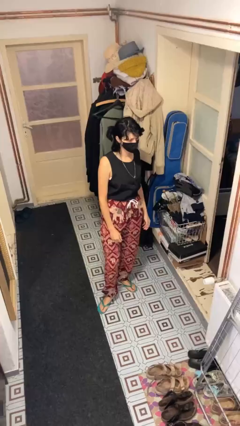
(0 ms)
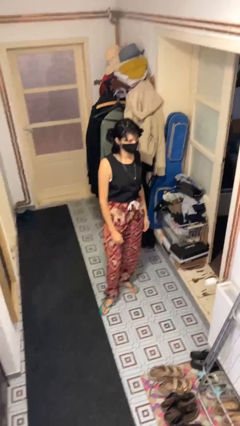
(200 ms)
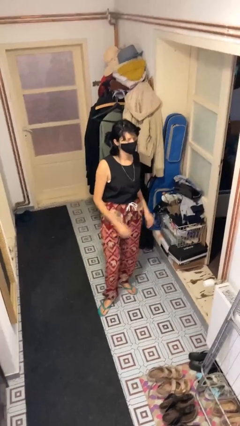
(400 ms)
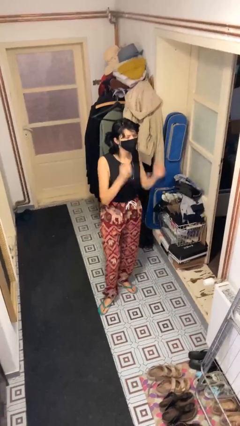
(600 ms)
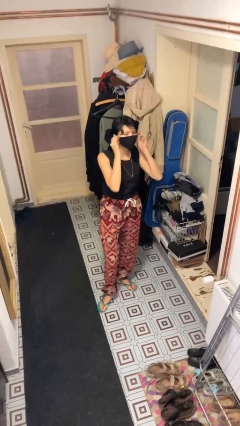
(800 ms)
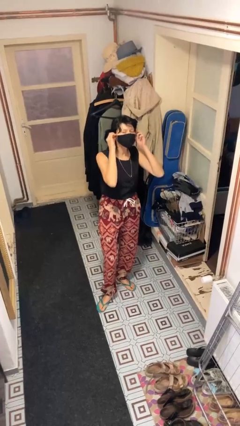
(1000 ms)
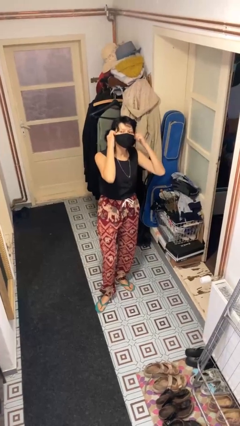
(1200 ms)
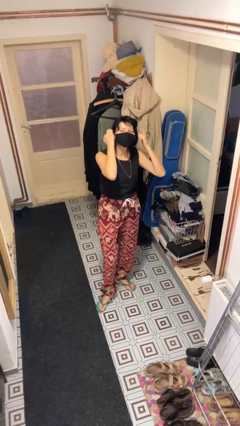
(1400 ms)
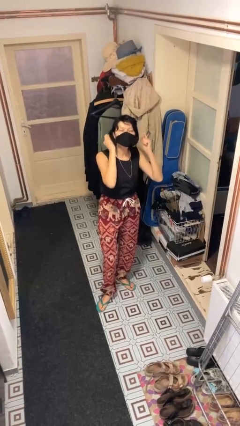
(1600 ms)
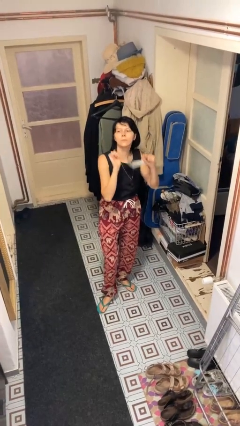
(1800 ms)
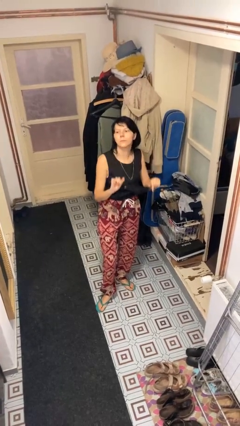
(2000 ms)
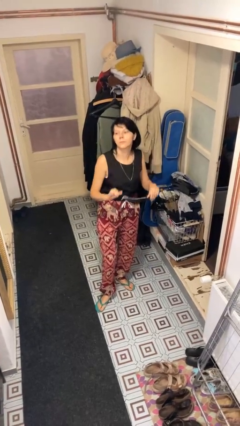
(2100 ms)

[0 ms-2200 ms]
person takes off facemask

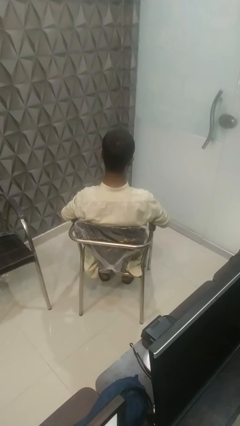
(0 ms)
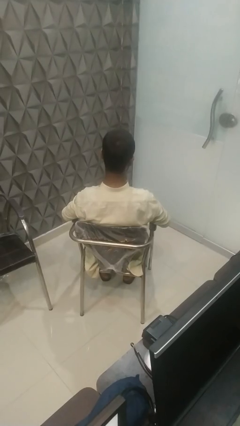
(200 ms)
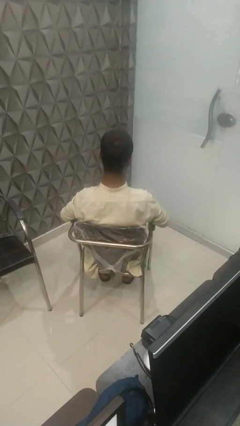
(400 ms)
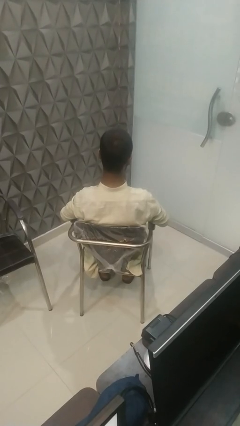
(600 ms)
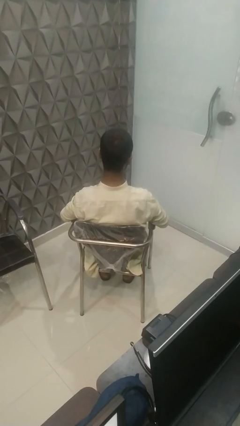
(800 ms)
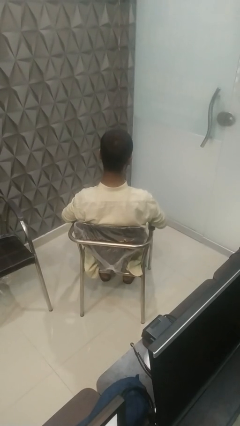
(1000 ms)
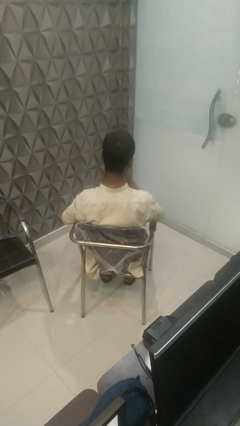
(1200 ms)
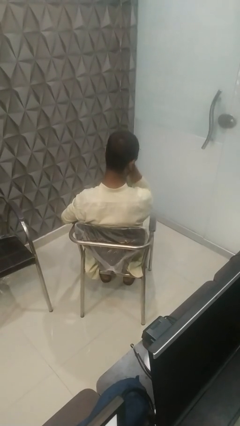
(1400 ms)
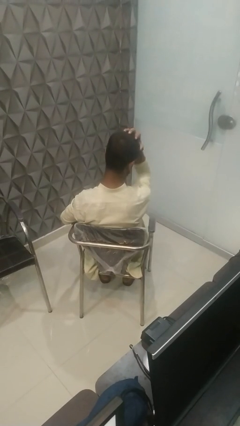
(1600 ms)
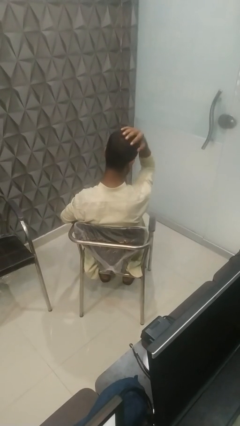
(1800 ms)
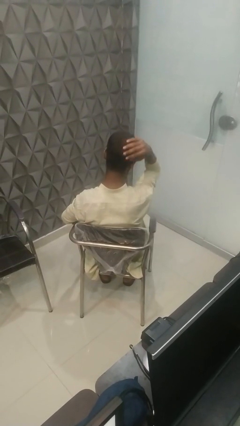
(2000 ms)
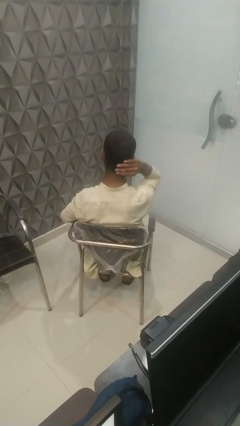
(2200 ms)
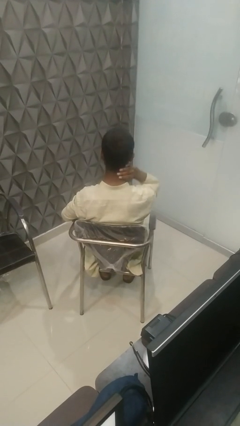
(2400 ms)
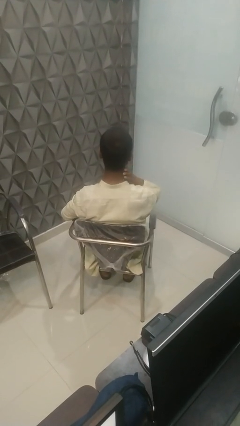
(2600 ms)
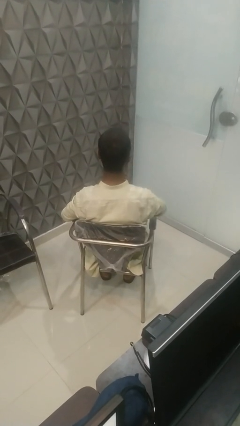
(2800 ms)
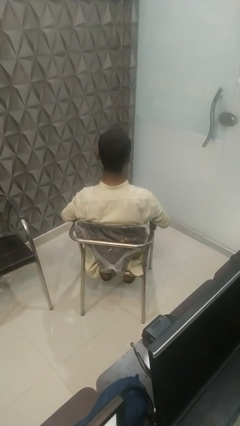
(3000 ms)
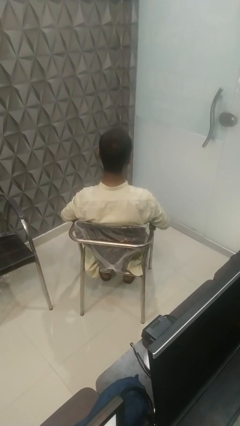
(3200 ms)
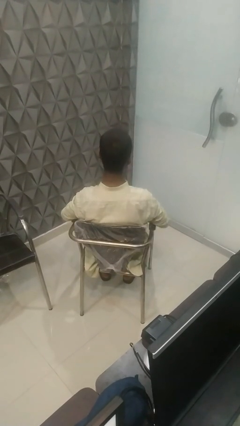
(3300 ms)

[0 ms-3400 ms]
person strokes hair

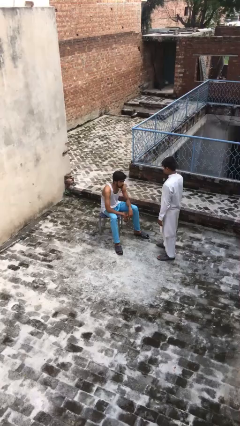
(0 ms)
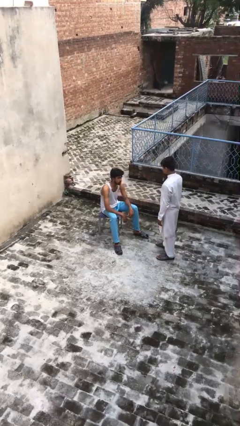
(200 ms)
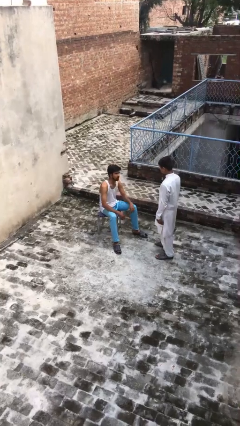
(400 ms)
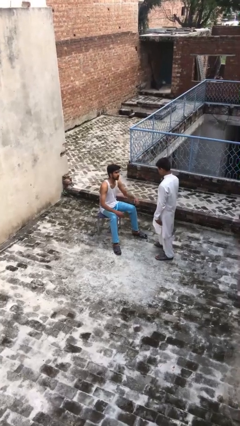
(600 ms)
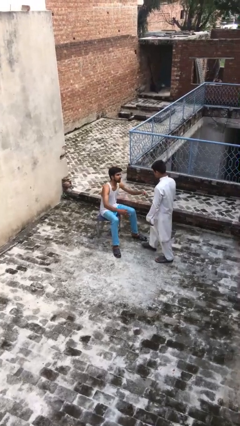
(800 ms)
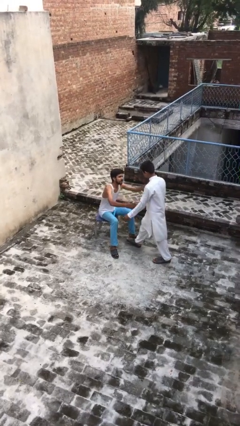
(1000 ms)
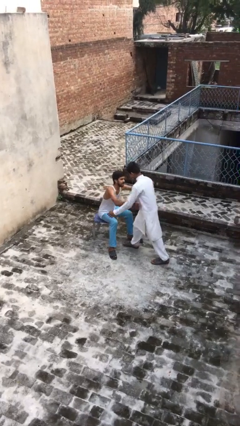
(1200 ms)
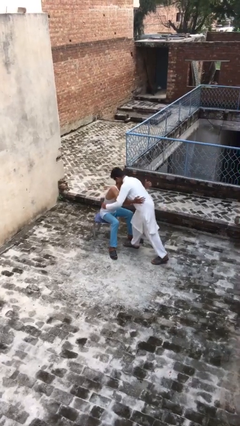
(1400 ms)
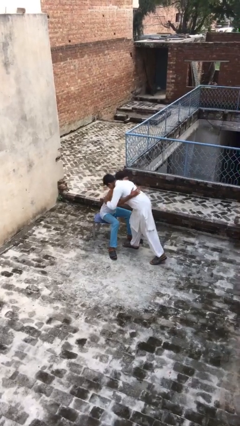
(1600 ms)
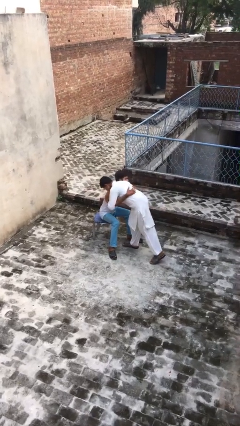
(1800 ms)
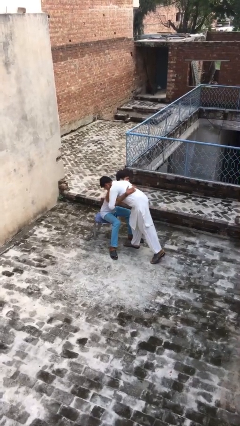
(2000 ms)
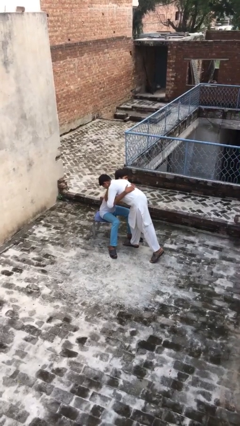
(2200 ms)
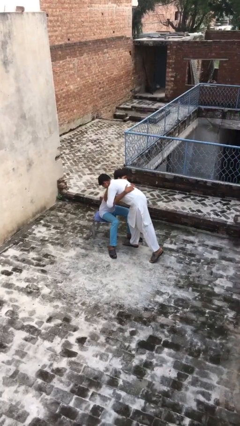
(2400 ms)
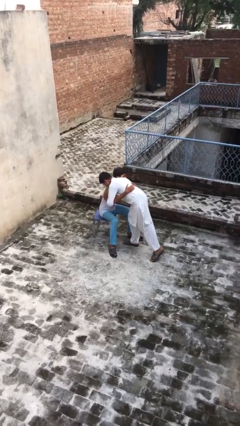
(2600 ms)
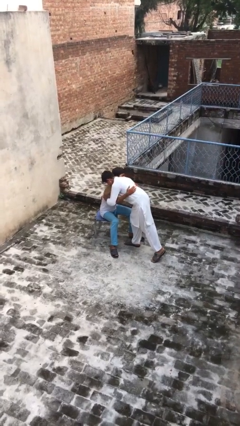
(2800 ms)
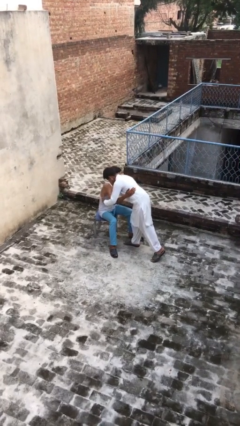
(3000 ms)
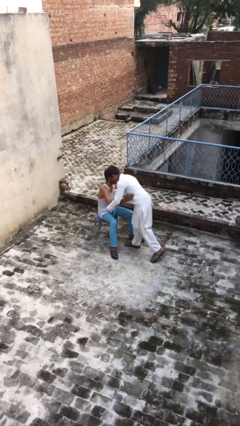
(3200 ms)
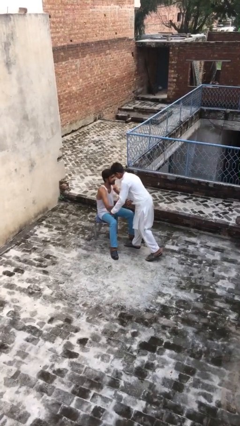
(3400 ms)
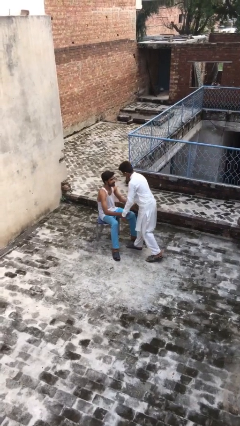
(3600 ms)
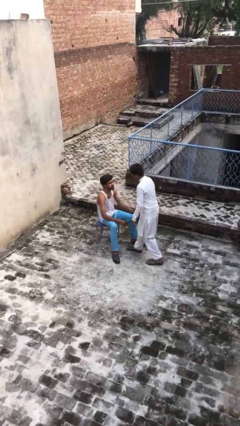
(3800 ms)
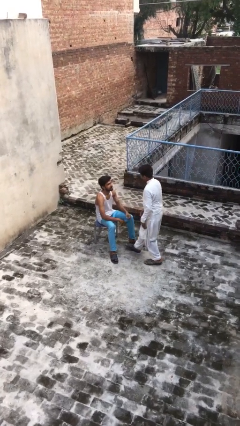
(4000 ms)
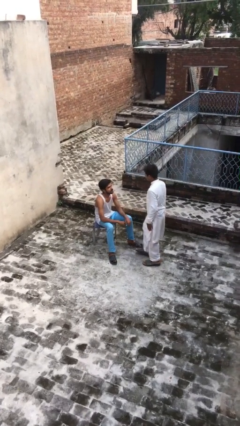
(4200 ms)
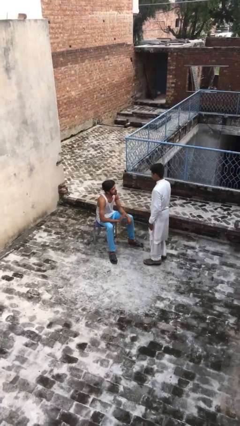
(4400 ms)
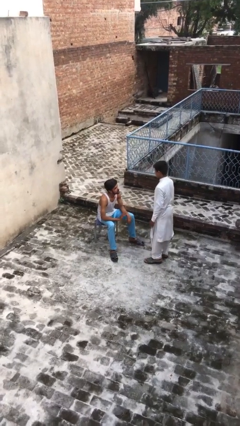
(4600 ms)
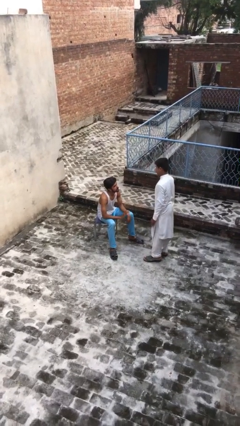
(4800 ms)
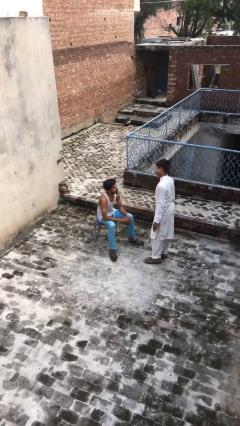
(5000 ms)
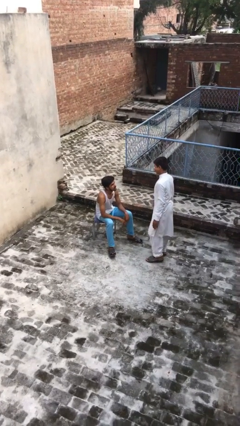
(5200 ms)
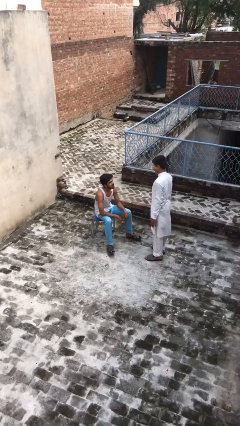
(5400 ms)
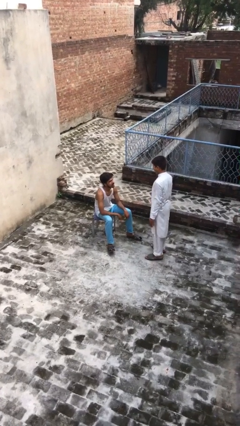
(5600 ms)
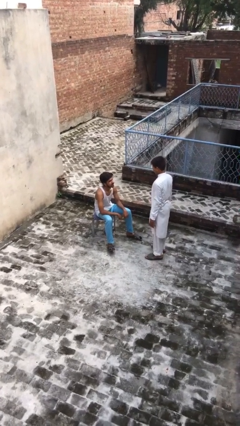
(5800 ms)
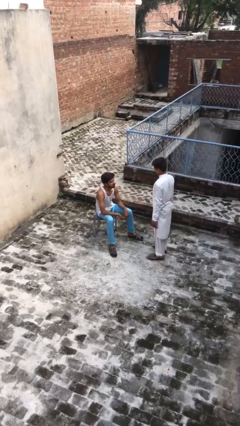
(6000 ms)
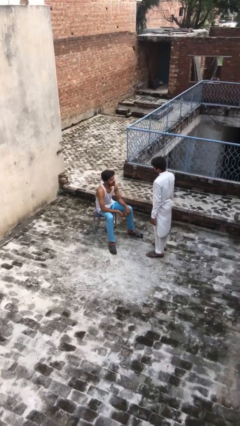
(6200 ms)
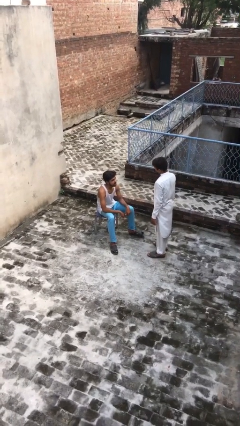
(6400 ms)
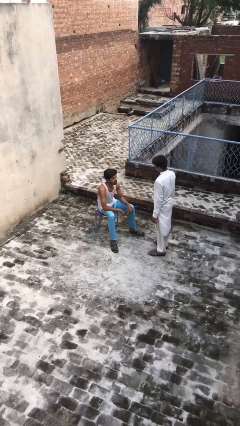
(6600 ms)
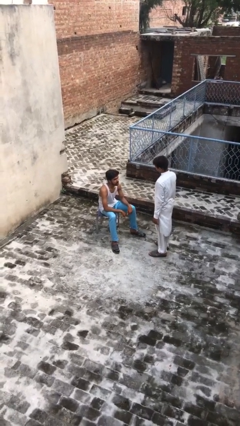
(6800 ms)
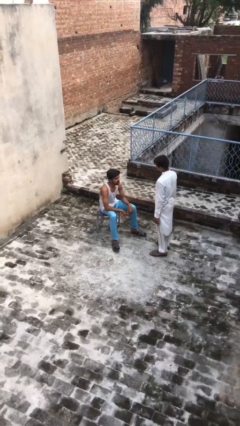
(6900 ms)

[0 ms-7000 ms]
person embraces person

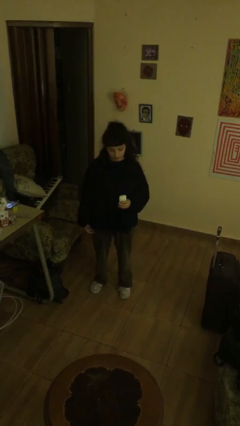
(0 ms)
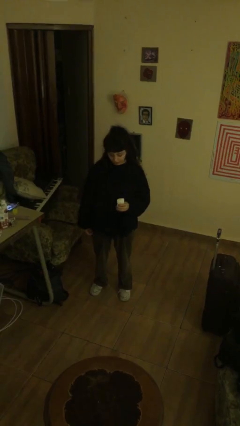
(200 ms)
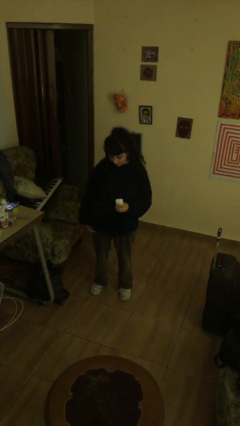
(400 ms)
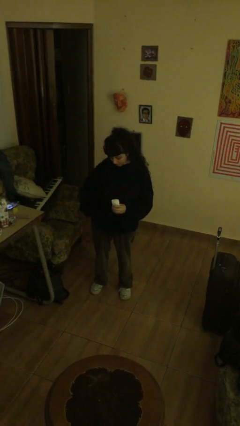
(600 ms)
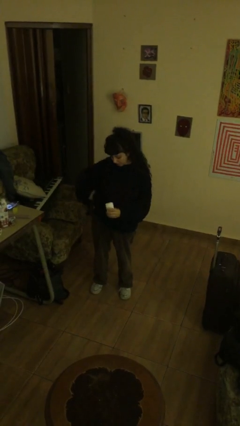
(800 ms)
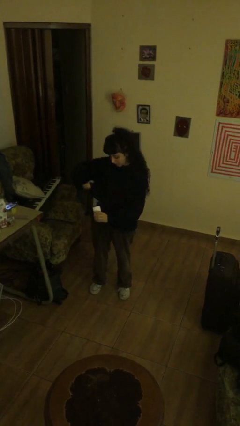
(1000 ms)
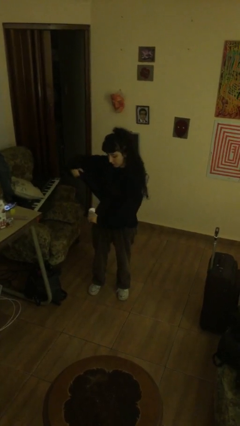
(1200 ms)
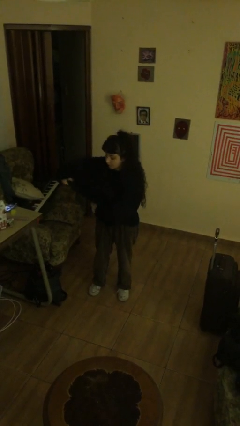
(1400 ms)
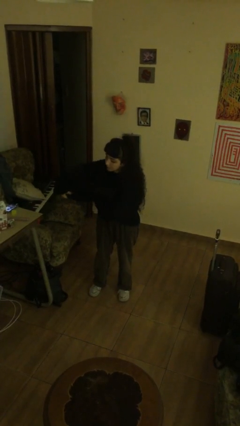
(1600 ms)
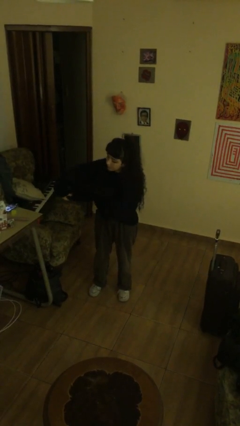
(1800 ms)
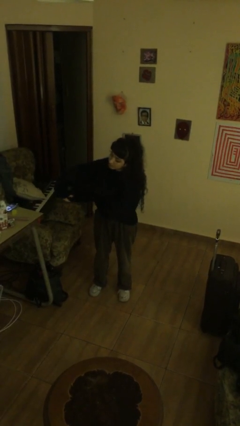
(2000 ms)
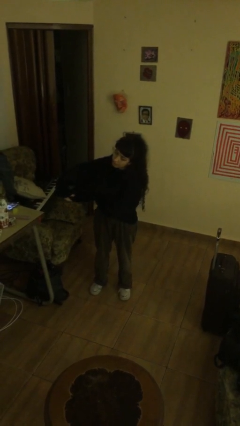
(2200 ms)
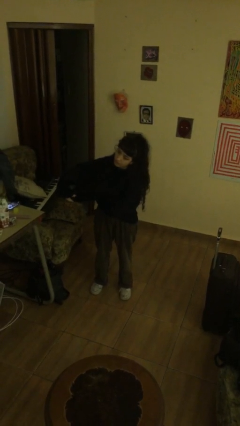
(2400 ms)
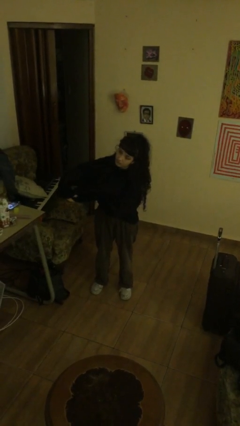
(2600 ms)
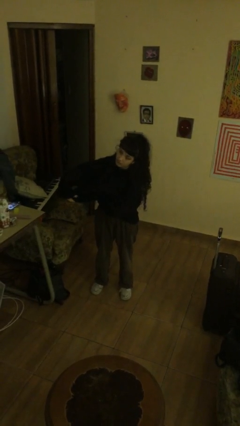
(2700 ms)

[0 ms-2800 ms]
person applies deodorant

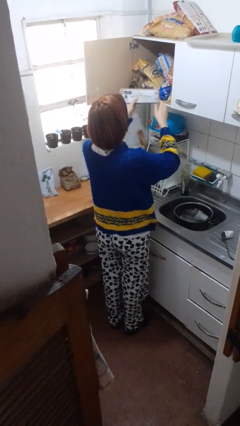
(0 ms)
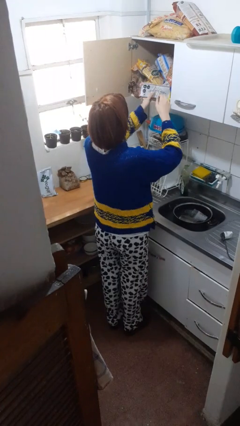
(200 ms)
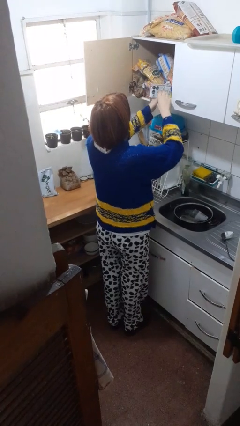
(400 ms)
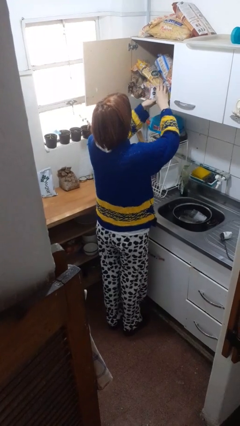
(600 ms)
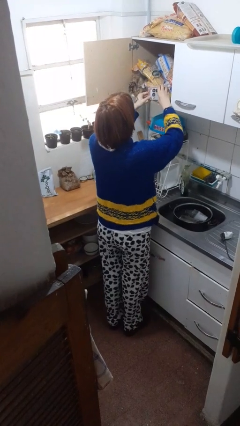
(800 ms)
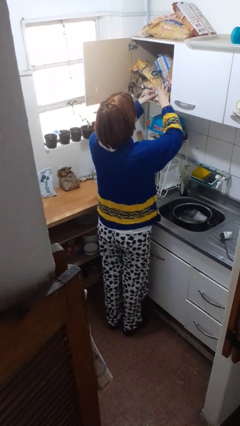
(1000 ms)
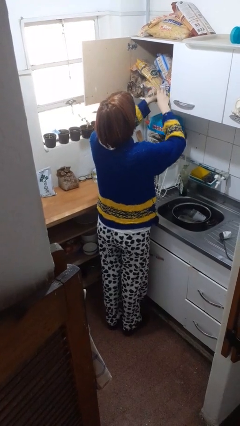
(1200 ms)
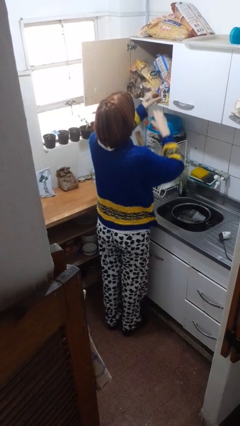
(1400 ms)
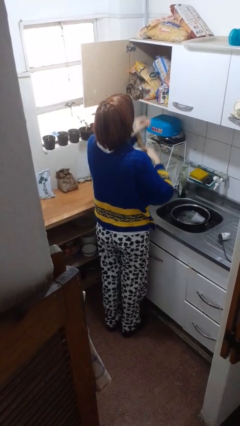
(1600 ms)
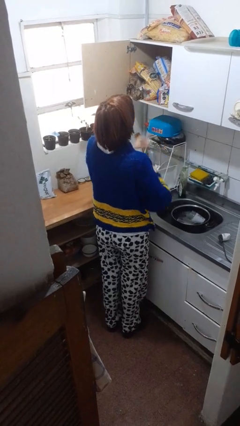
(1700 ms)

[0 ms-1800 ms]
person puts object in cabinet

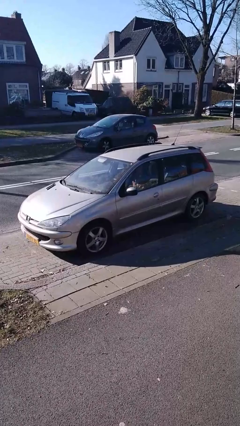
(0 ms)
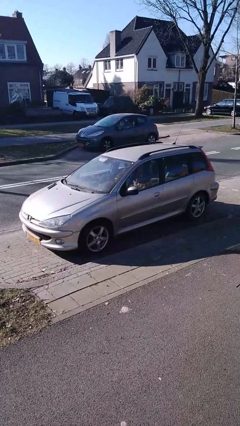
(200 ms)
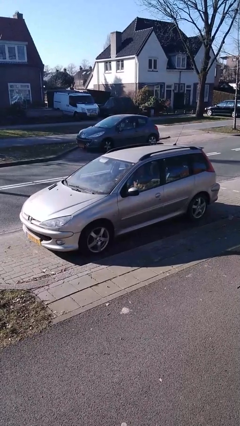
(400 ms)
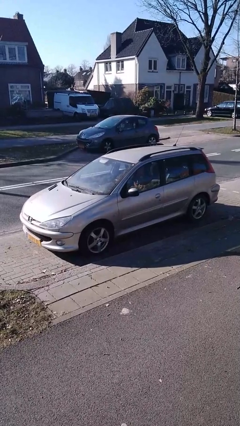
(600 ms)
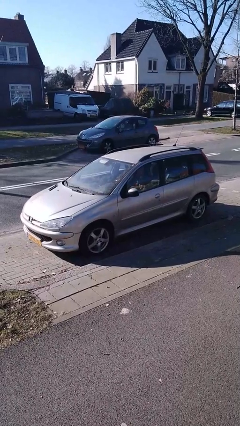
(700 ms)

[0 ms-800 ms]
car drops off person
